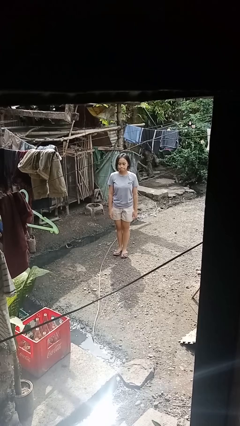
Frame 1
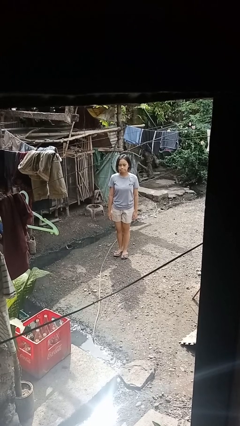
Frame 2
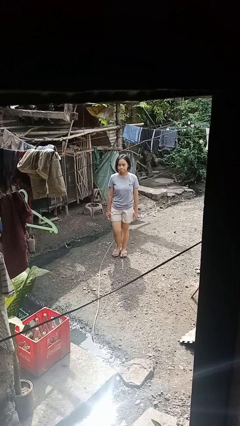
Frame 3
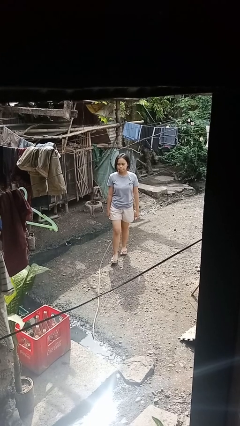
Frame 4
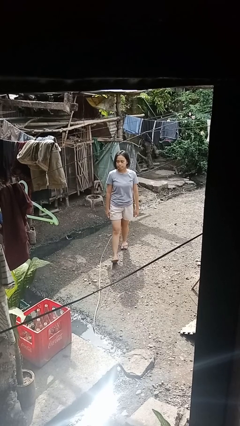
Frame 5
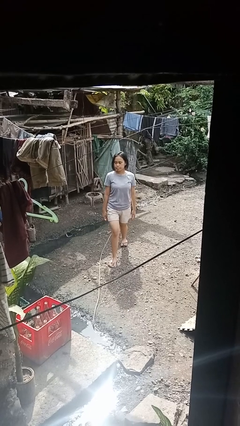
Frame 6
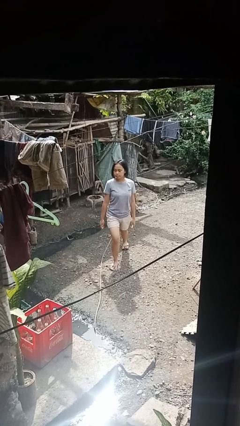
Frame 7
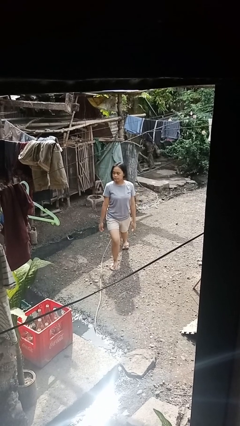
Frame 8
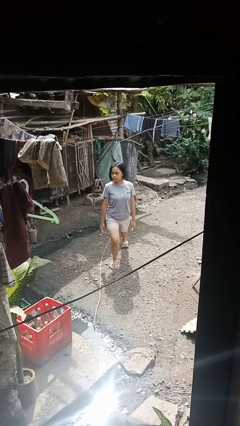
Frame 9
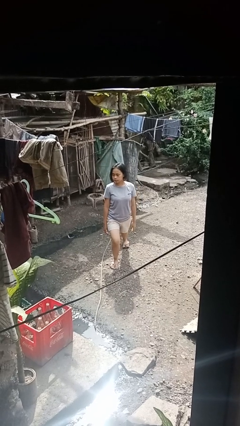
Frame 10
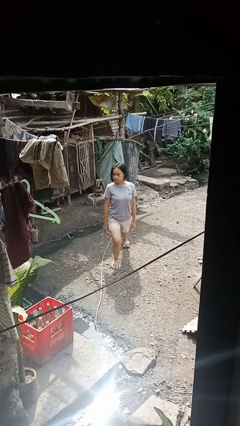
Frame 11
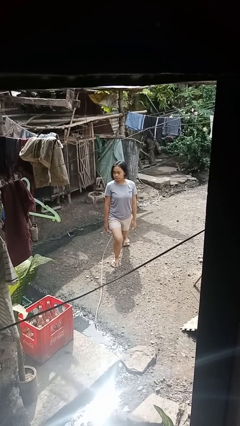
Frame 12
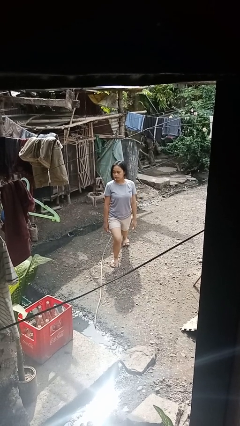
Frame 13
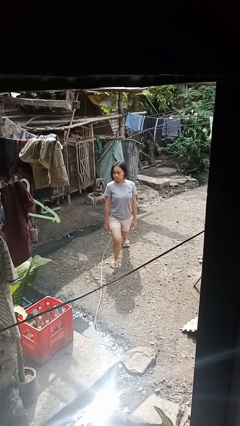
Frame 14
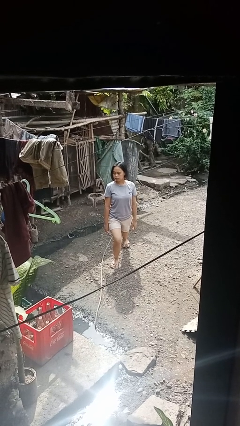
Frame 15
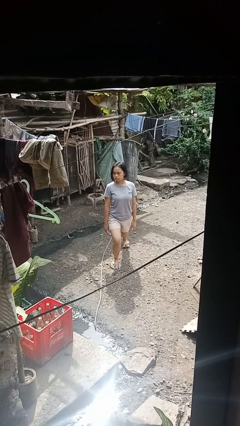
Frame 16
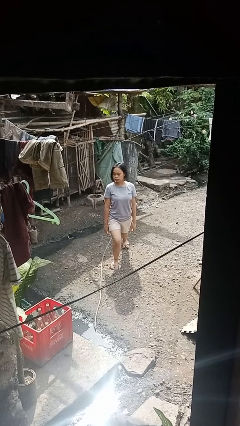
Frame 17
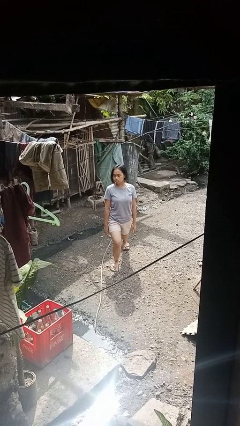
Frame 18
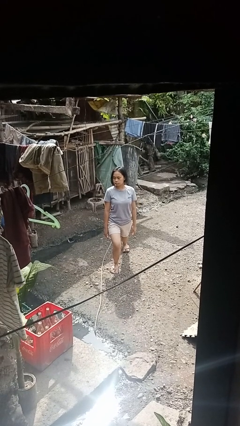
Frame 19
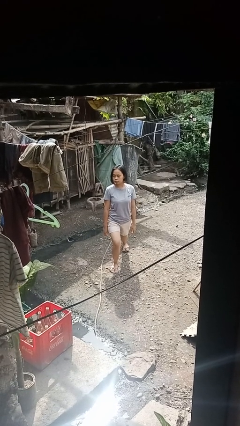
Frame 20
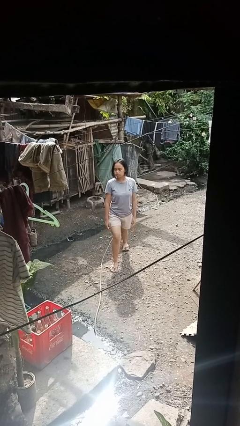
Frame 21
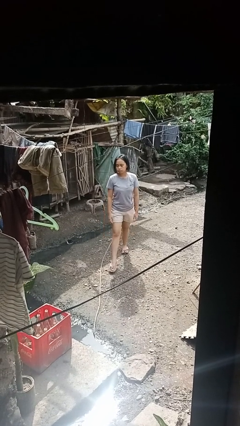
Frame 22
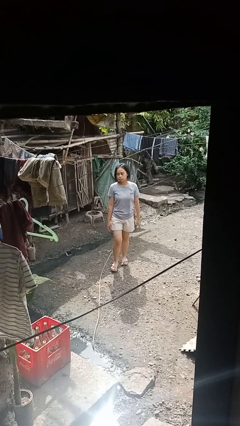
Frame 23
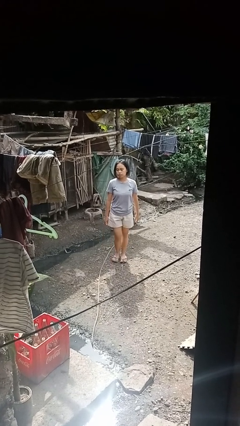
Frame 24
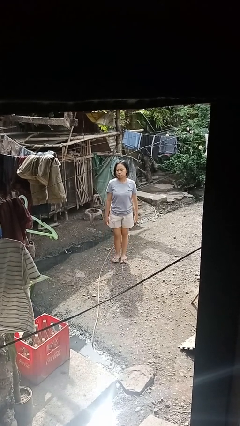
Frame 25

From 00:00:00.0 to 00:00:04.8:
person exercises with lunges

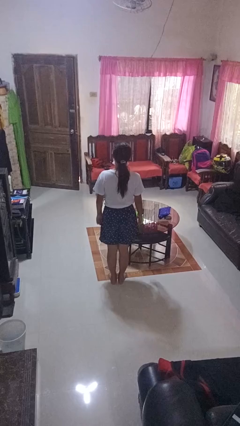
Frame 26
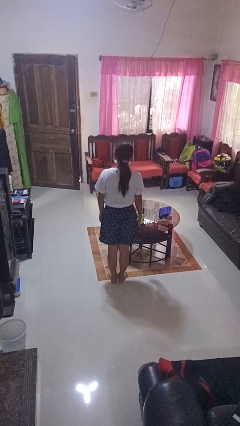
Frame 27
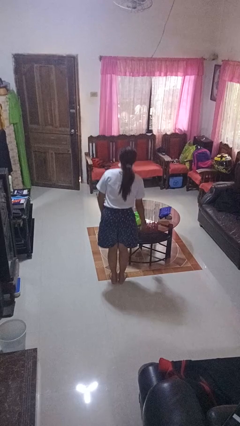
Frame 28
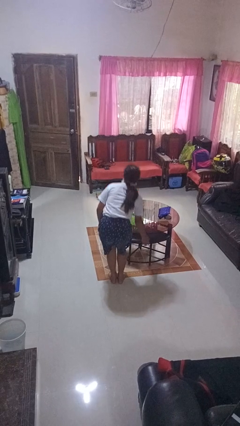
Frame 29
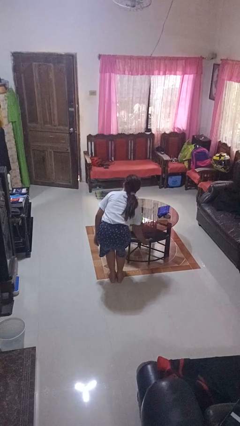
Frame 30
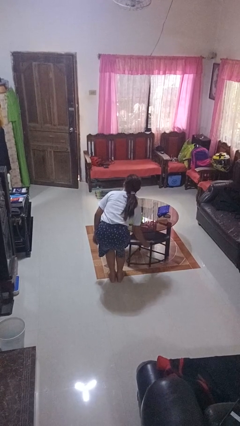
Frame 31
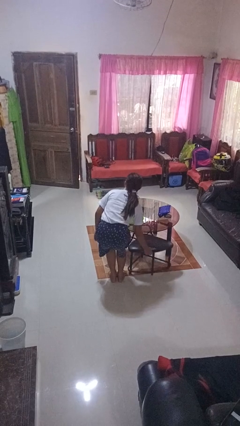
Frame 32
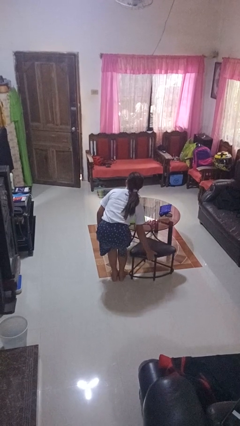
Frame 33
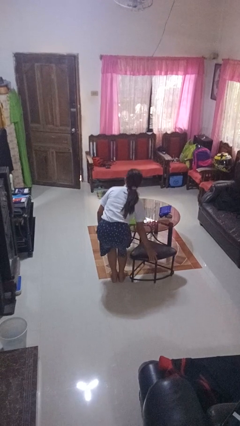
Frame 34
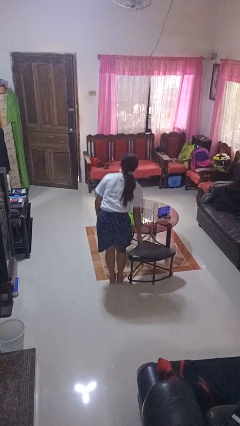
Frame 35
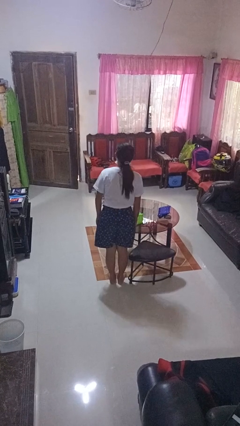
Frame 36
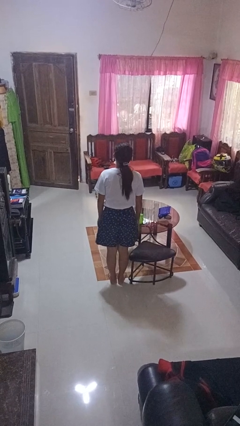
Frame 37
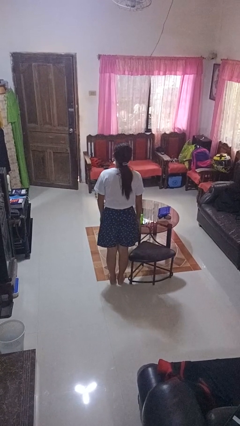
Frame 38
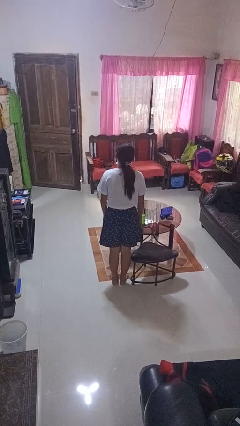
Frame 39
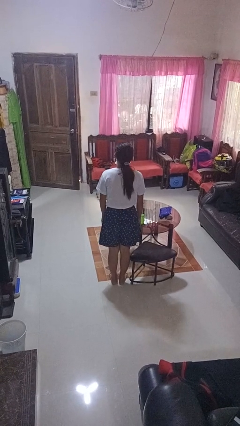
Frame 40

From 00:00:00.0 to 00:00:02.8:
person pulls out chair

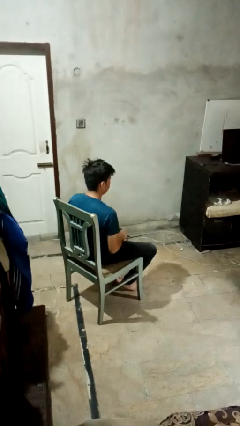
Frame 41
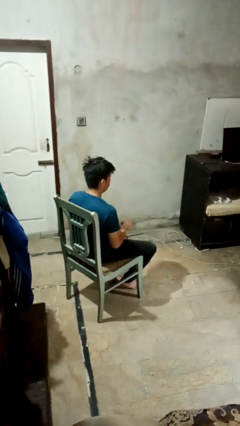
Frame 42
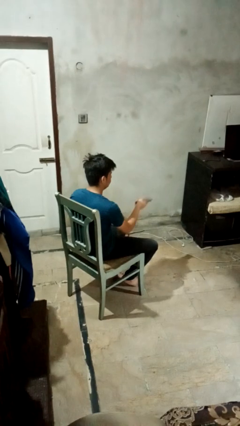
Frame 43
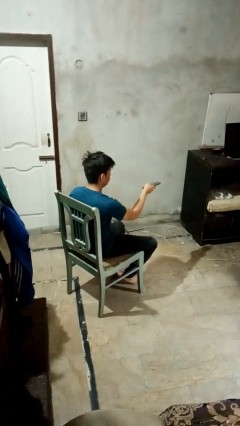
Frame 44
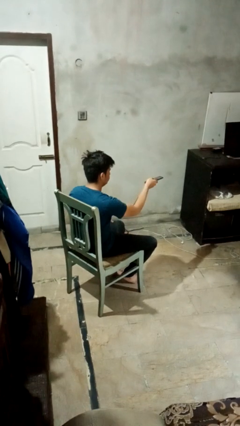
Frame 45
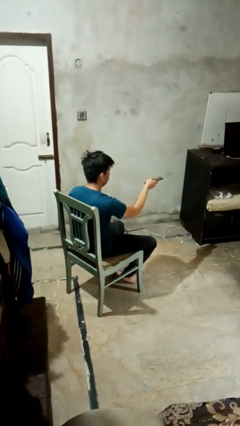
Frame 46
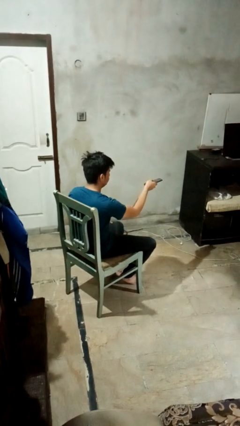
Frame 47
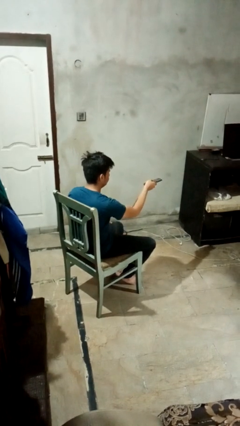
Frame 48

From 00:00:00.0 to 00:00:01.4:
person uses television remote

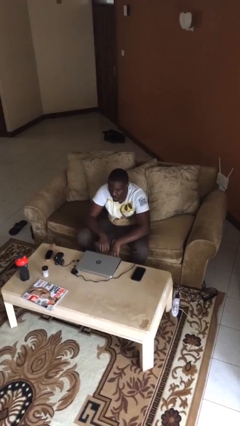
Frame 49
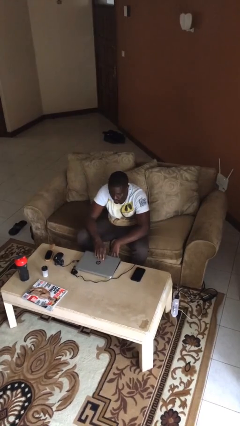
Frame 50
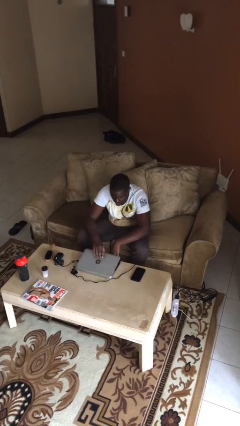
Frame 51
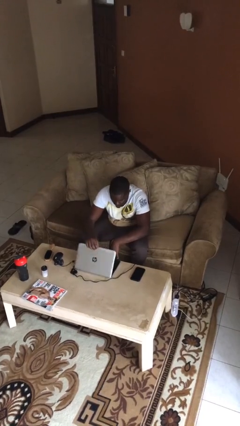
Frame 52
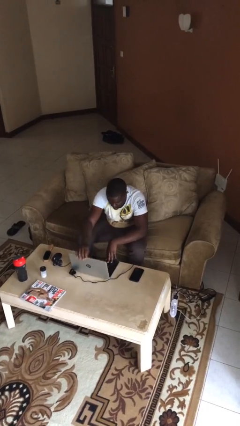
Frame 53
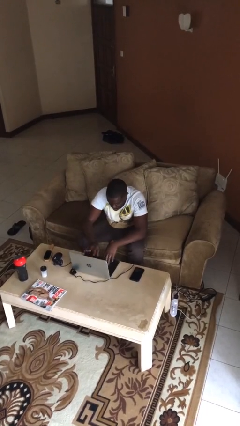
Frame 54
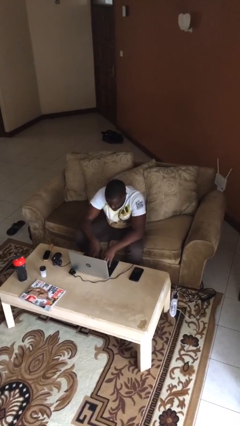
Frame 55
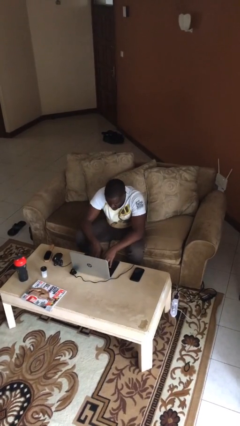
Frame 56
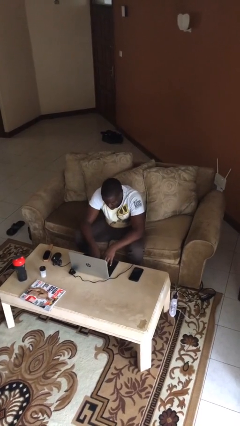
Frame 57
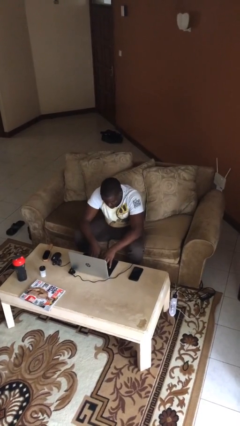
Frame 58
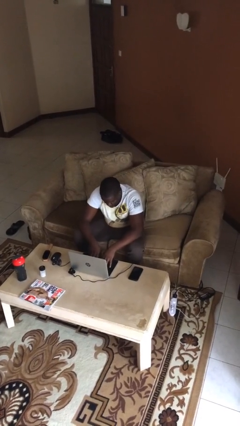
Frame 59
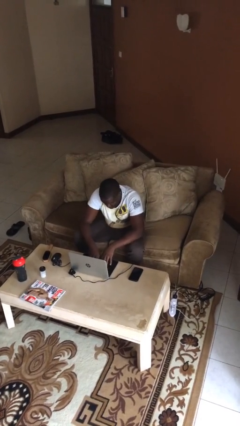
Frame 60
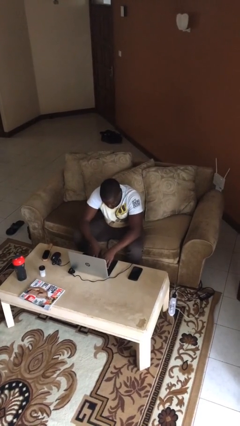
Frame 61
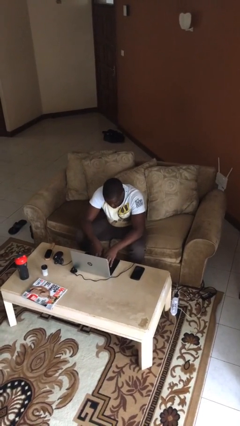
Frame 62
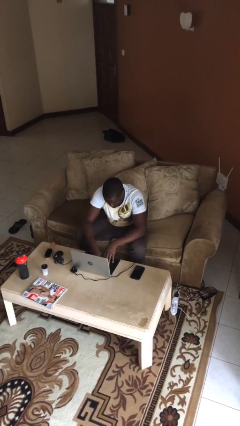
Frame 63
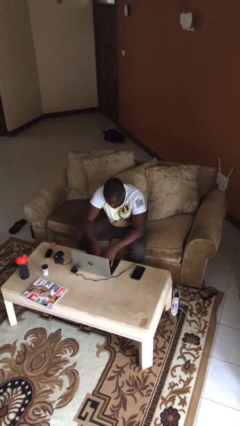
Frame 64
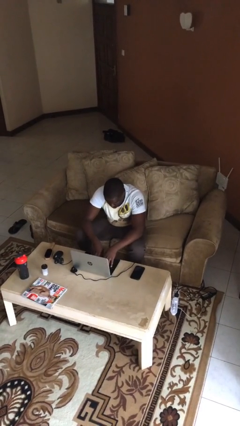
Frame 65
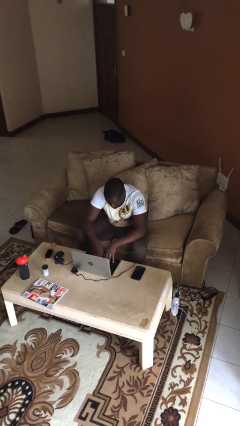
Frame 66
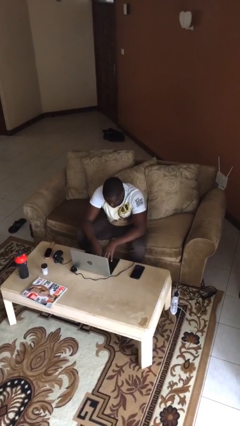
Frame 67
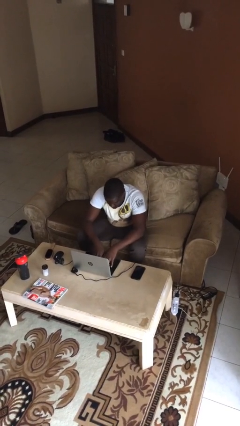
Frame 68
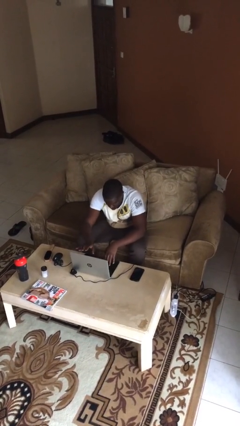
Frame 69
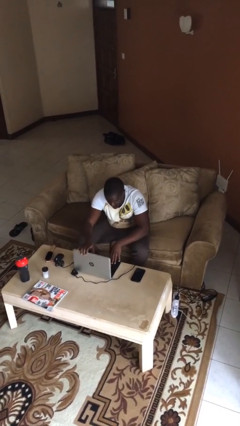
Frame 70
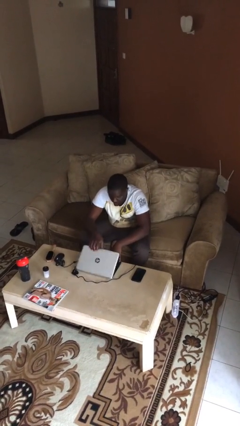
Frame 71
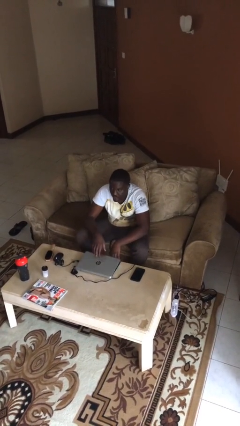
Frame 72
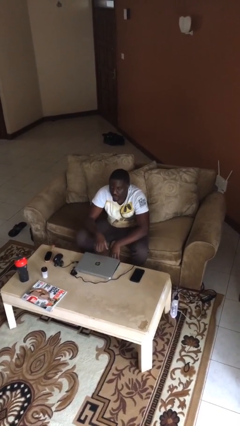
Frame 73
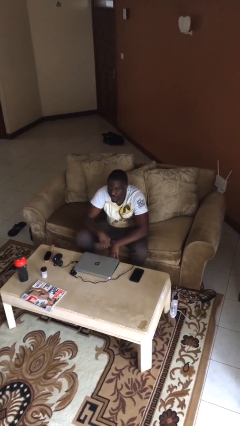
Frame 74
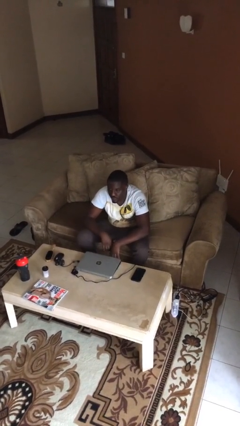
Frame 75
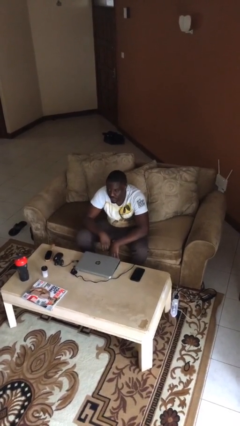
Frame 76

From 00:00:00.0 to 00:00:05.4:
person interacts with laptop

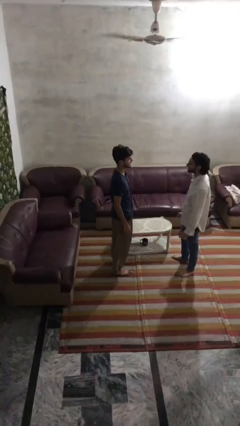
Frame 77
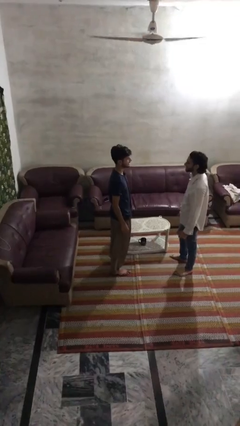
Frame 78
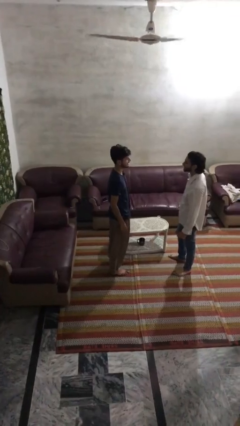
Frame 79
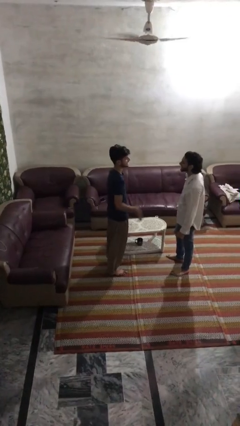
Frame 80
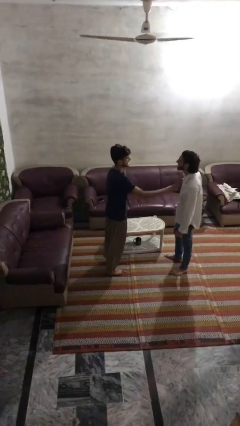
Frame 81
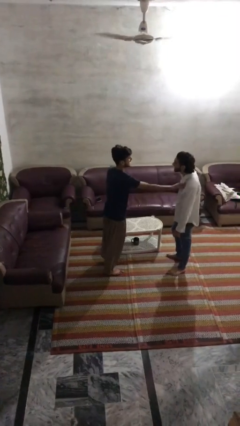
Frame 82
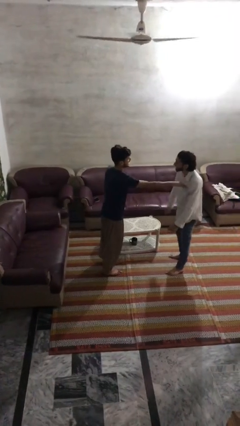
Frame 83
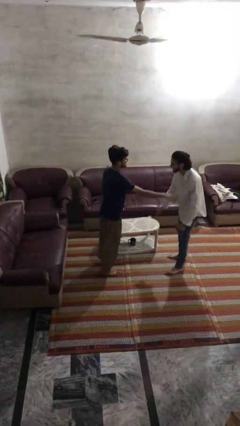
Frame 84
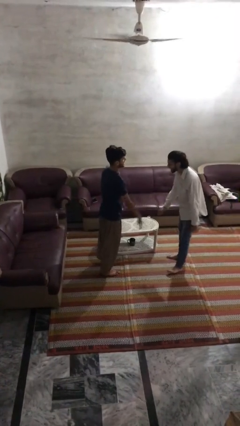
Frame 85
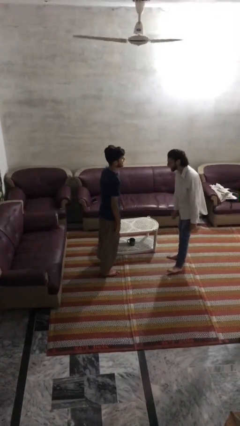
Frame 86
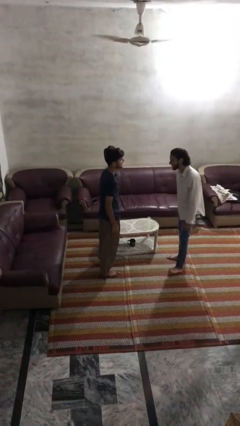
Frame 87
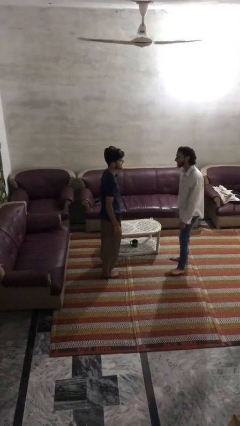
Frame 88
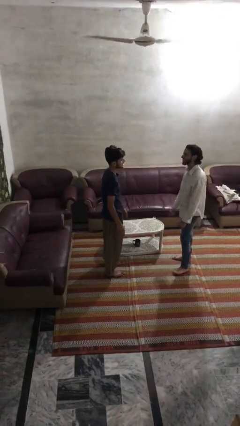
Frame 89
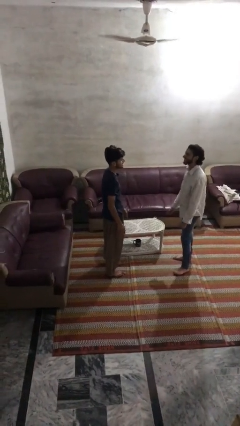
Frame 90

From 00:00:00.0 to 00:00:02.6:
person shoves person
